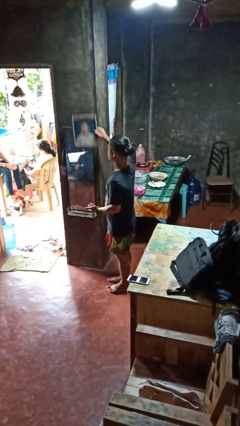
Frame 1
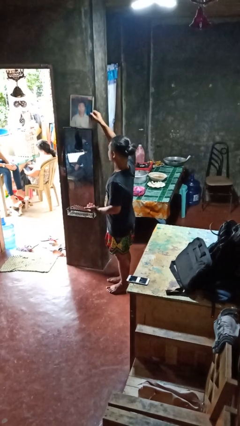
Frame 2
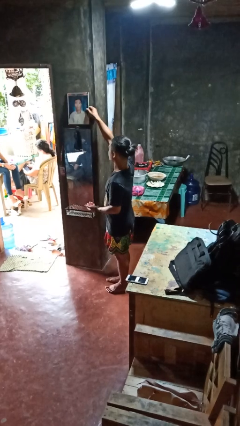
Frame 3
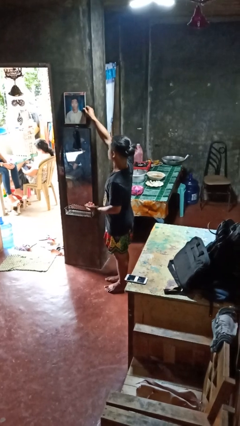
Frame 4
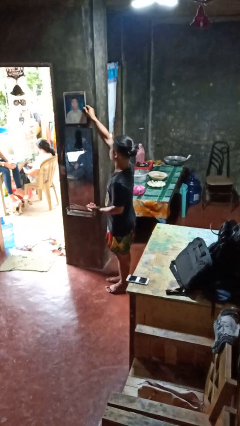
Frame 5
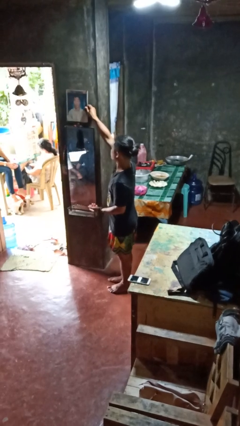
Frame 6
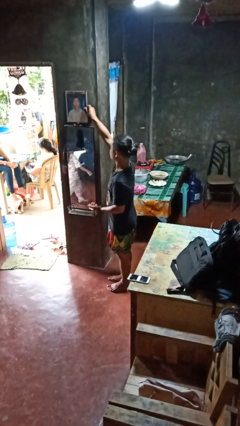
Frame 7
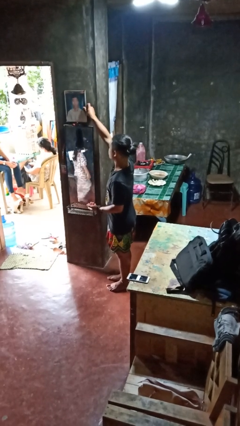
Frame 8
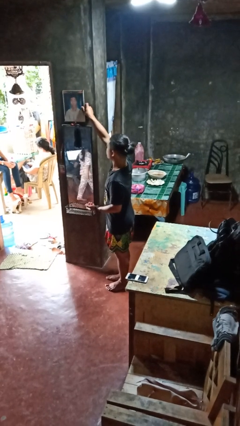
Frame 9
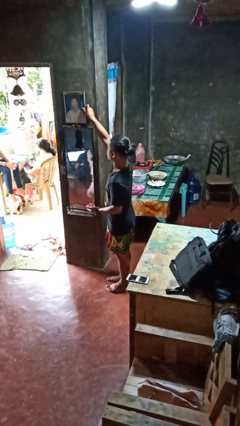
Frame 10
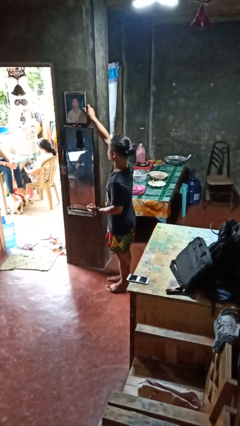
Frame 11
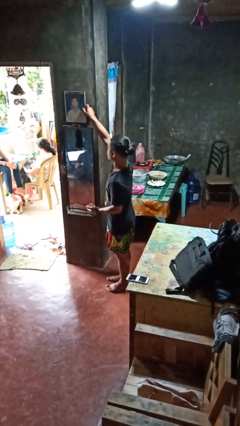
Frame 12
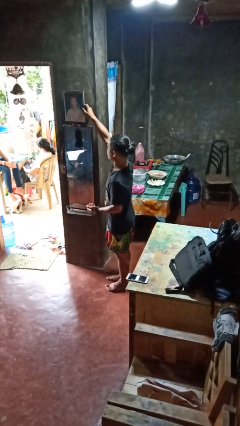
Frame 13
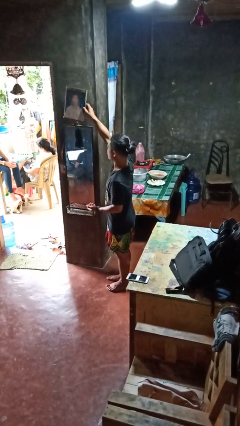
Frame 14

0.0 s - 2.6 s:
person puts up picture frame

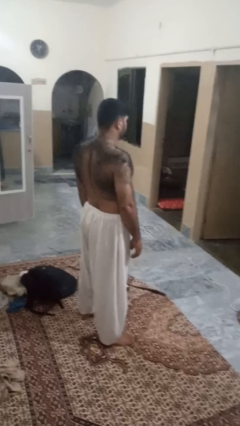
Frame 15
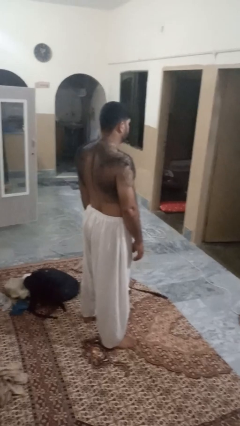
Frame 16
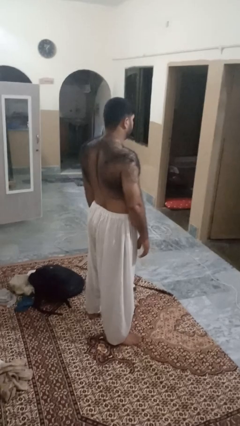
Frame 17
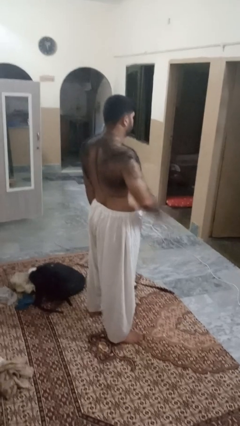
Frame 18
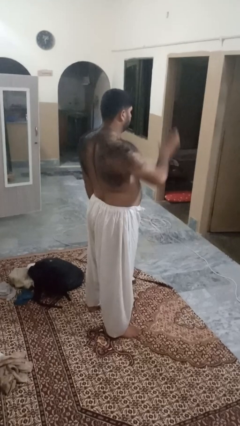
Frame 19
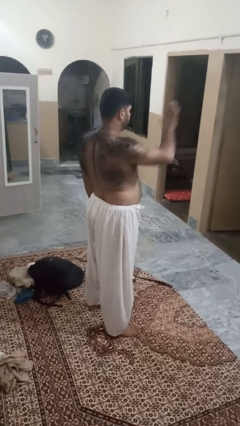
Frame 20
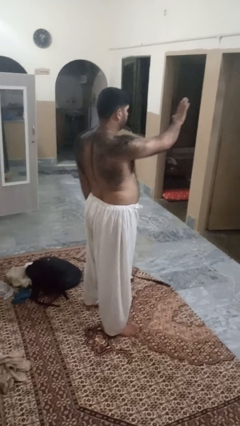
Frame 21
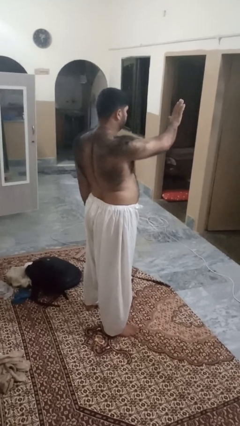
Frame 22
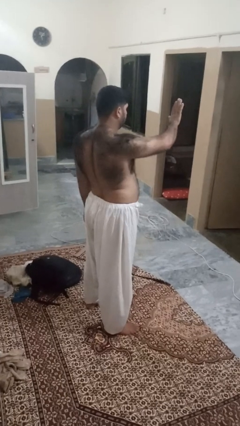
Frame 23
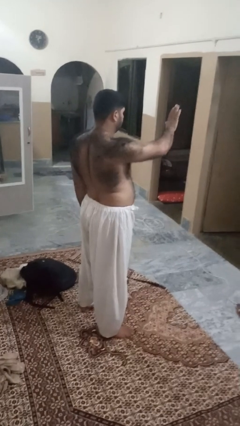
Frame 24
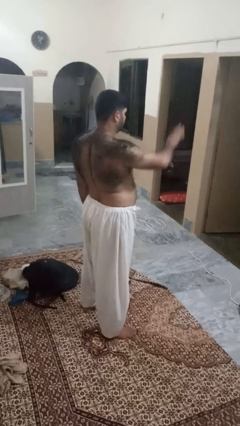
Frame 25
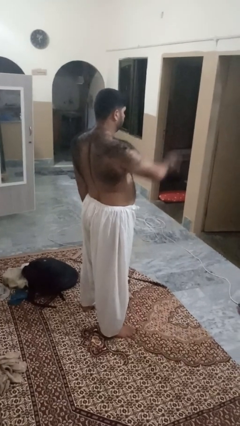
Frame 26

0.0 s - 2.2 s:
person gestures stop

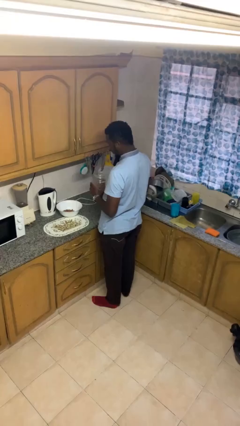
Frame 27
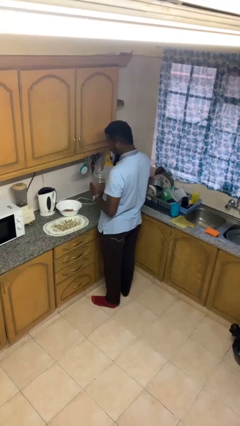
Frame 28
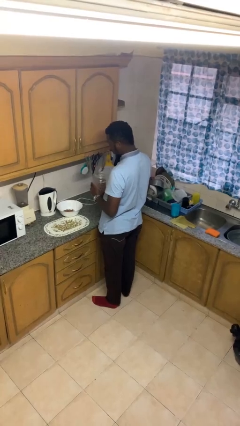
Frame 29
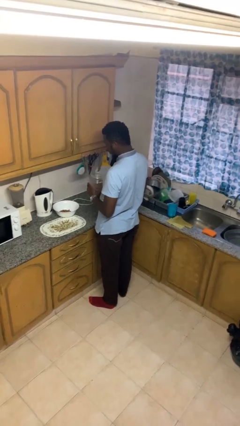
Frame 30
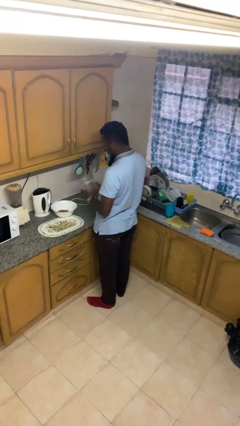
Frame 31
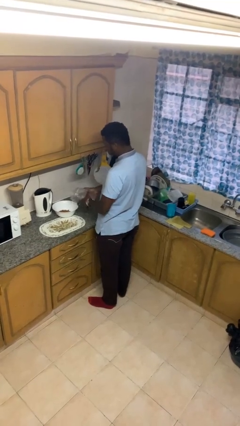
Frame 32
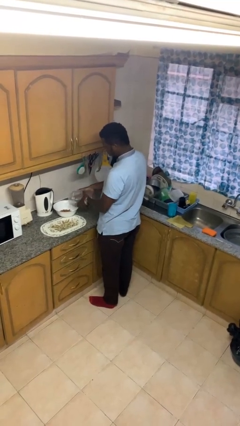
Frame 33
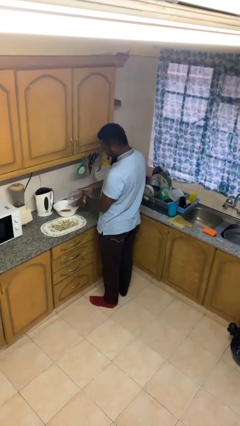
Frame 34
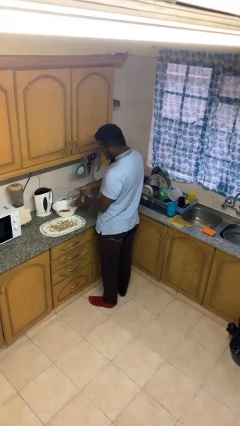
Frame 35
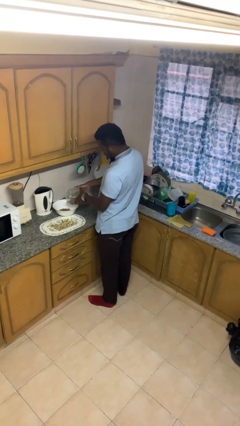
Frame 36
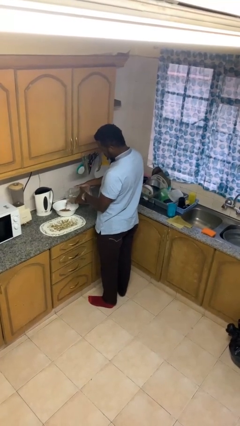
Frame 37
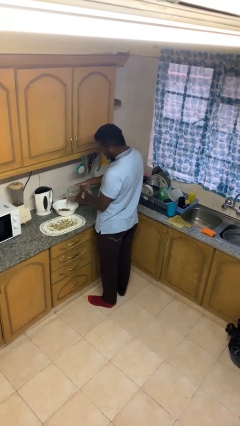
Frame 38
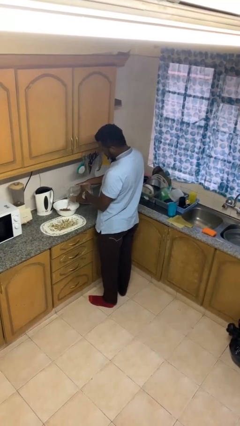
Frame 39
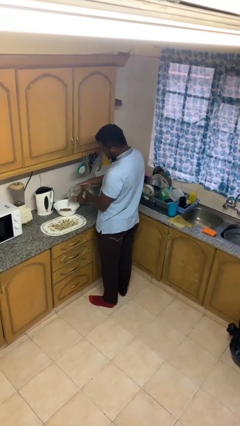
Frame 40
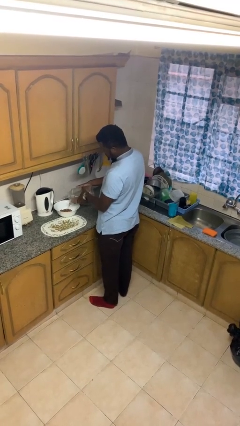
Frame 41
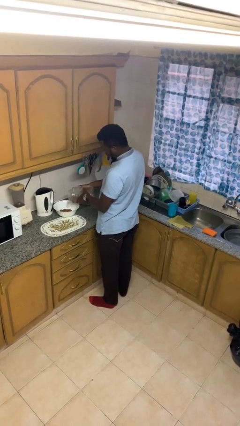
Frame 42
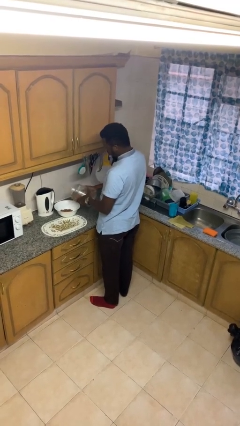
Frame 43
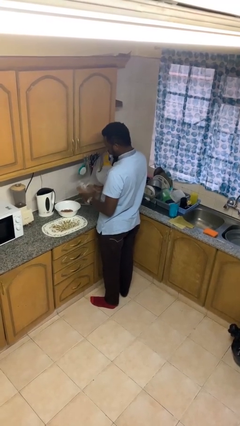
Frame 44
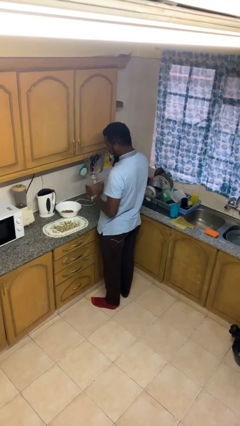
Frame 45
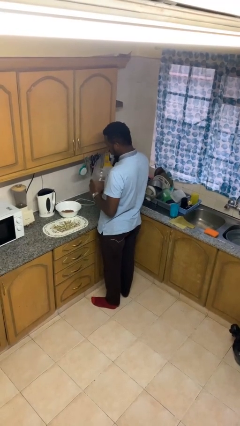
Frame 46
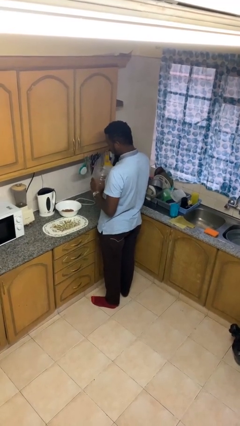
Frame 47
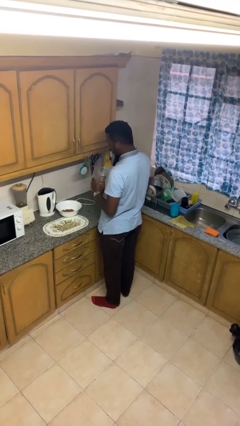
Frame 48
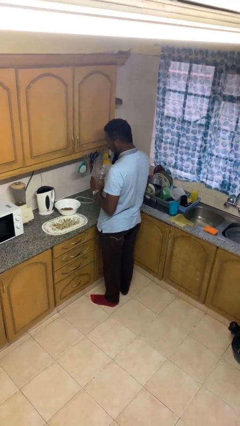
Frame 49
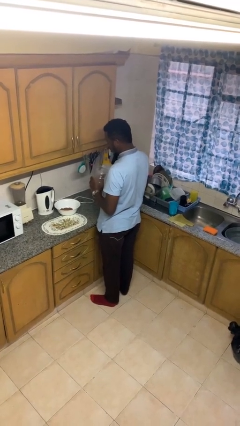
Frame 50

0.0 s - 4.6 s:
person pours into bowl

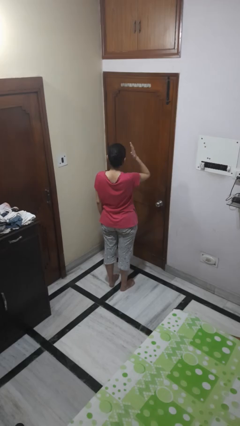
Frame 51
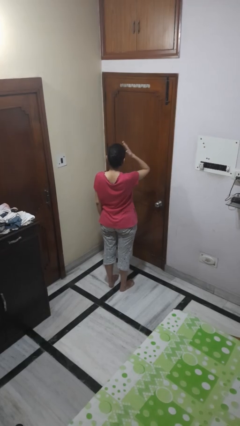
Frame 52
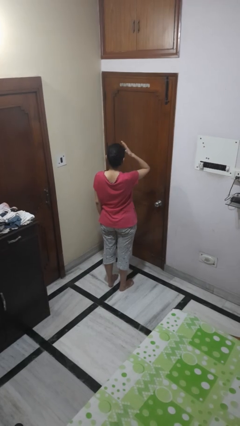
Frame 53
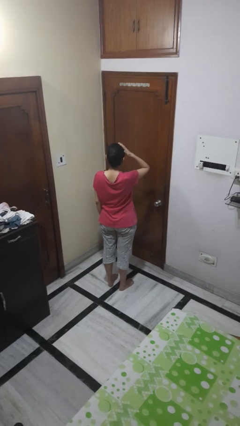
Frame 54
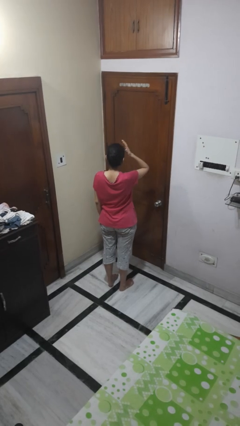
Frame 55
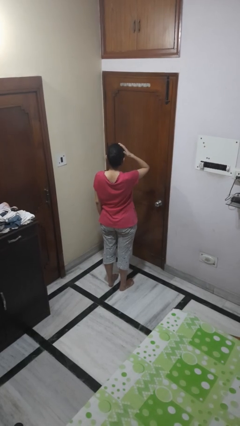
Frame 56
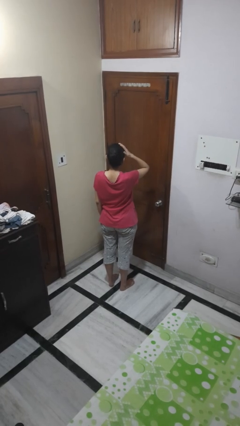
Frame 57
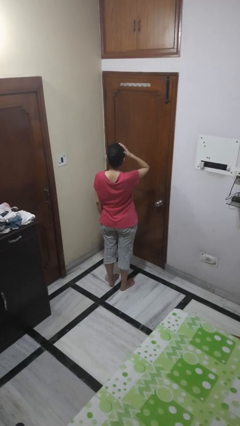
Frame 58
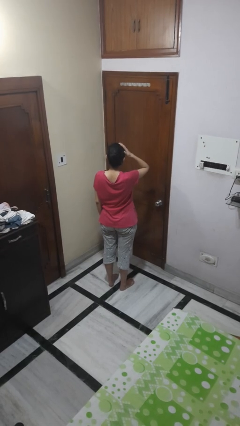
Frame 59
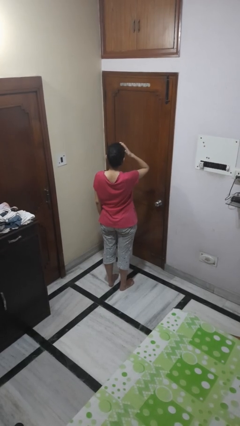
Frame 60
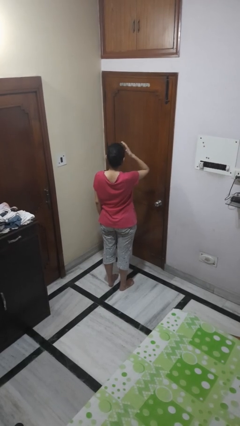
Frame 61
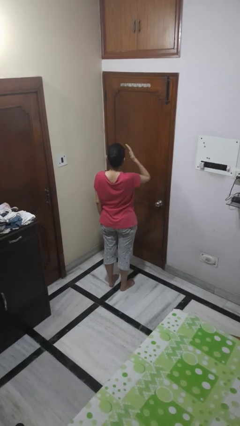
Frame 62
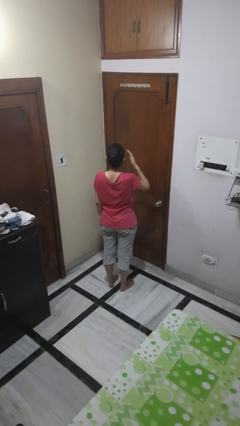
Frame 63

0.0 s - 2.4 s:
person pats head

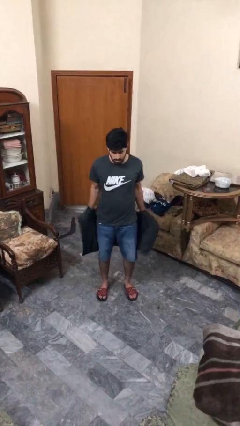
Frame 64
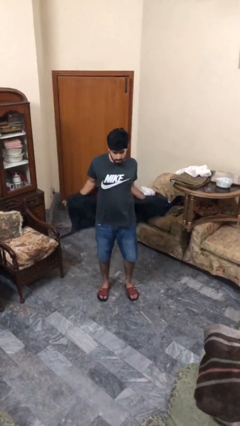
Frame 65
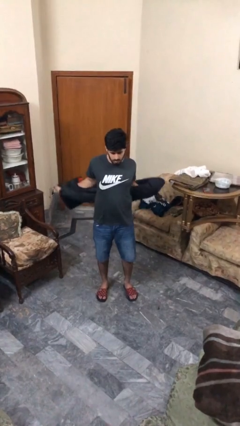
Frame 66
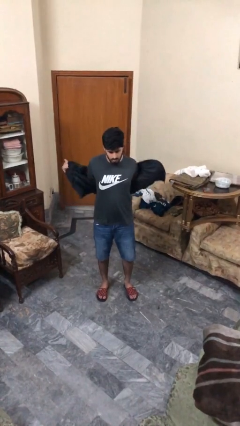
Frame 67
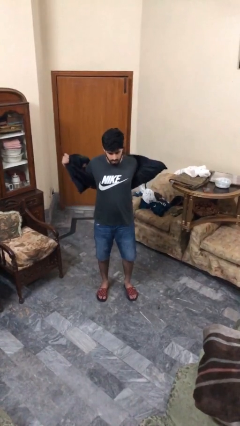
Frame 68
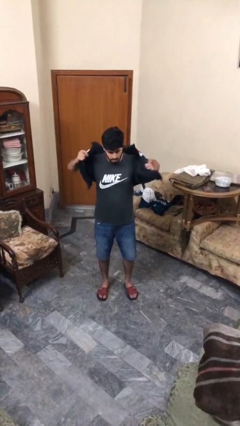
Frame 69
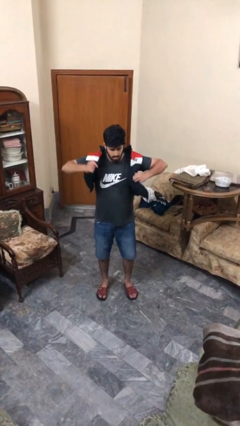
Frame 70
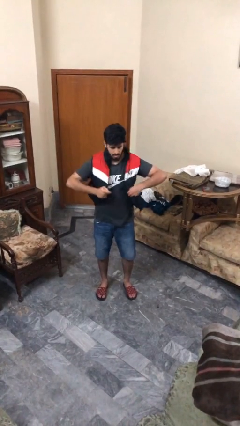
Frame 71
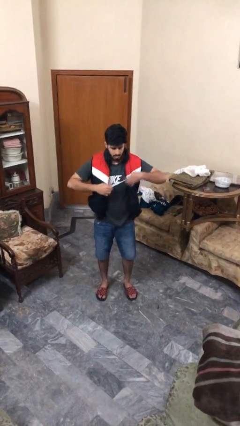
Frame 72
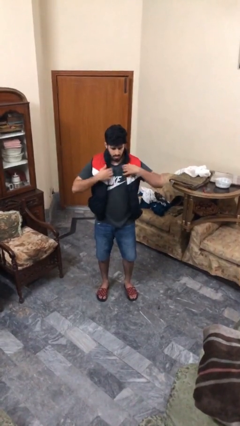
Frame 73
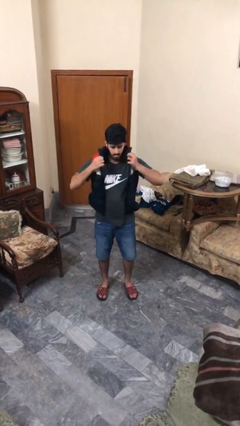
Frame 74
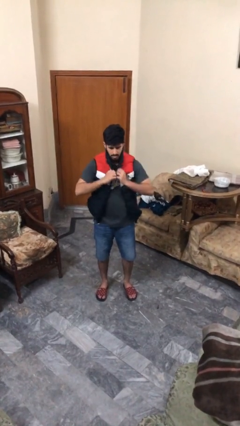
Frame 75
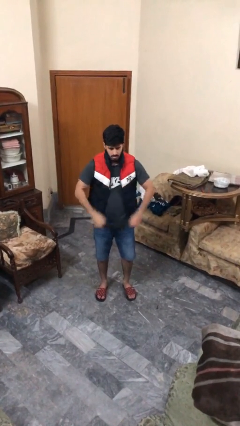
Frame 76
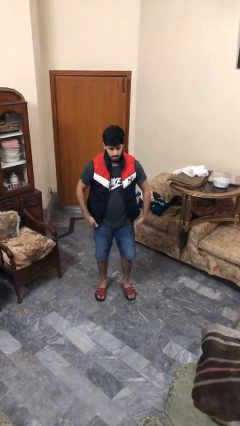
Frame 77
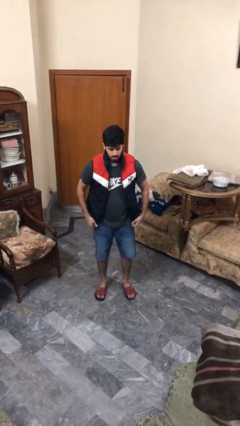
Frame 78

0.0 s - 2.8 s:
person puts on jacket

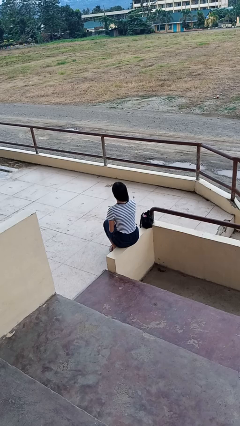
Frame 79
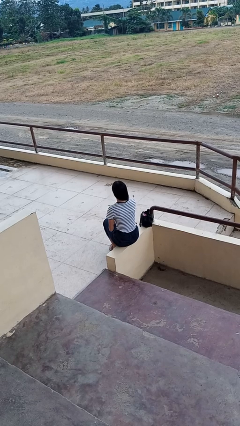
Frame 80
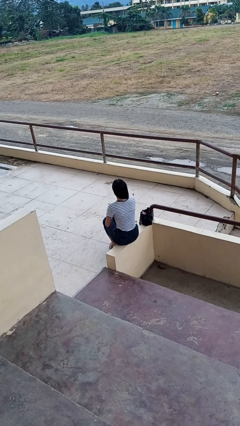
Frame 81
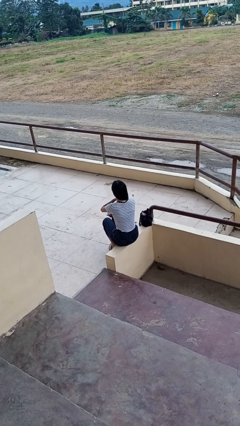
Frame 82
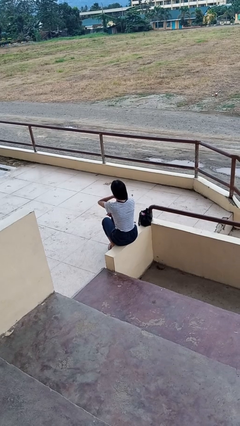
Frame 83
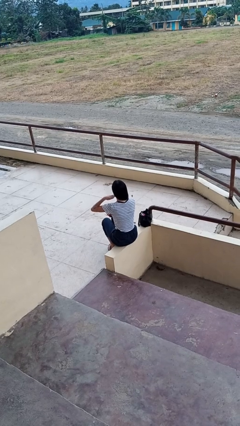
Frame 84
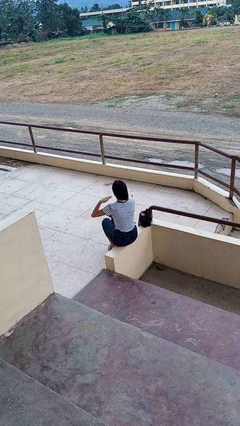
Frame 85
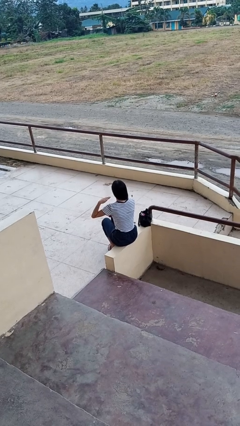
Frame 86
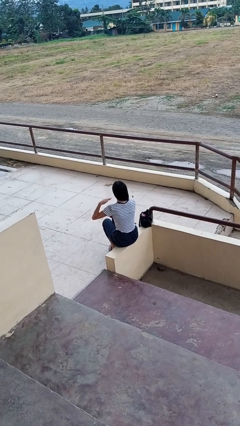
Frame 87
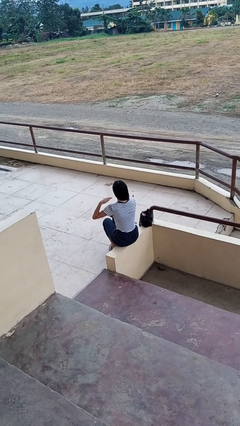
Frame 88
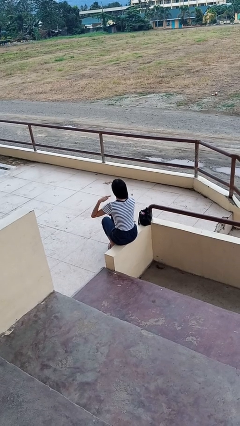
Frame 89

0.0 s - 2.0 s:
person gestures cut

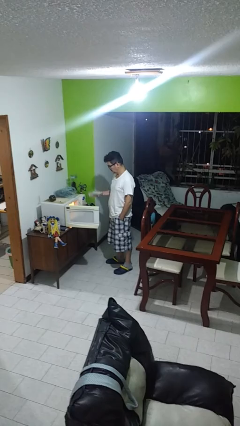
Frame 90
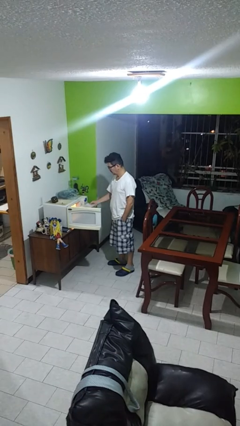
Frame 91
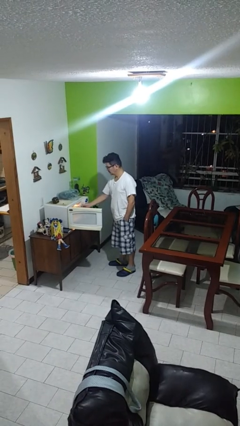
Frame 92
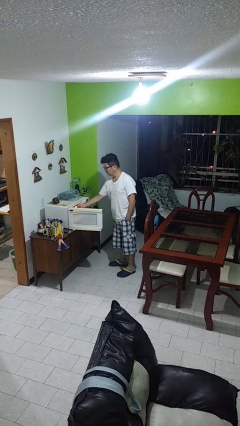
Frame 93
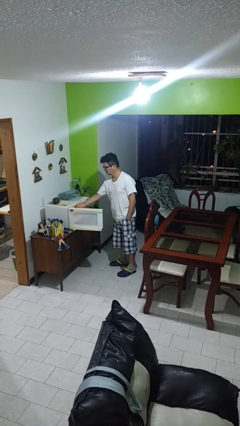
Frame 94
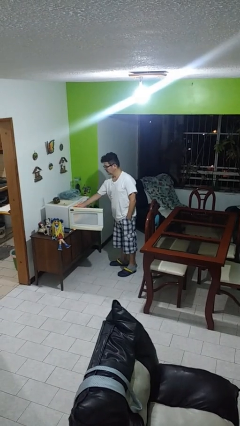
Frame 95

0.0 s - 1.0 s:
person puts object into microwave
